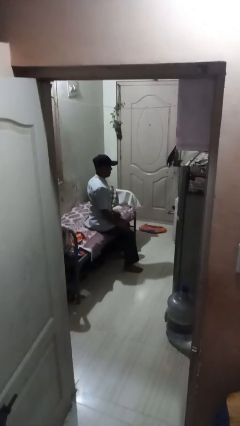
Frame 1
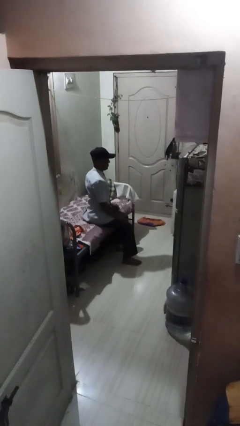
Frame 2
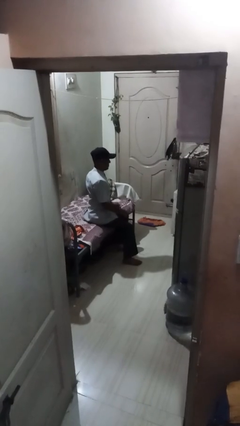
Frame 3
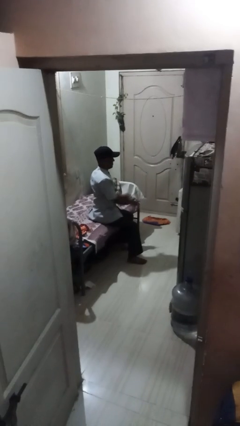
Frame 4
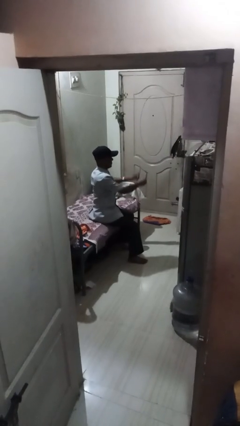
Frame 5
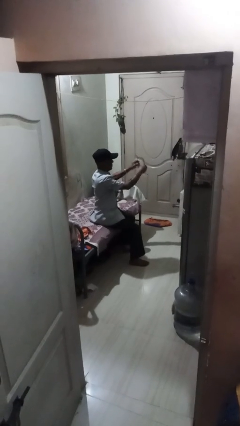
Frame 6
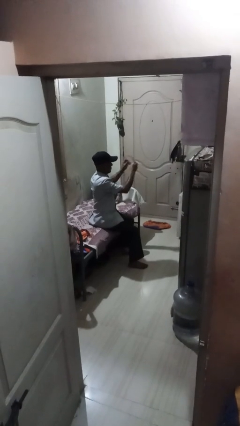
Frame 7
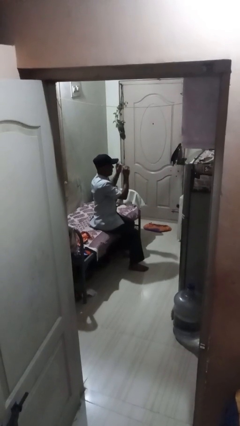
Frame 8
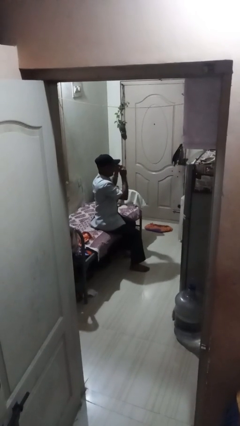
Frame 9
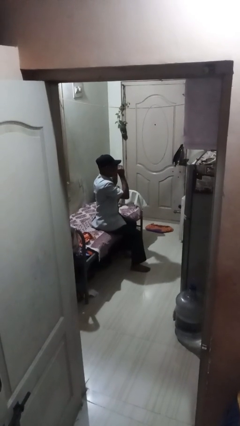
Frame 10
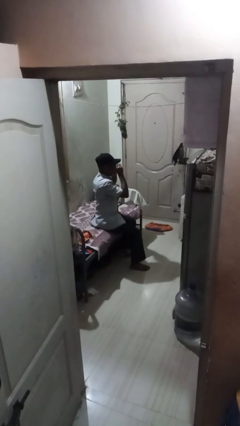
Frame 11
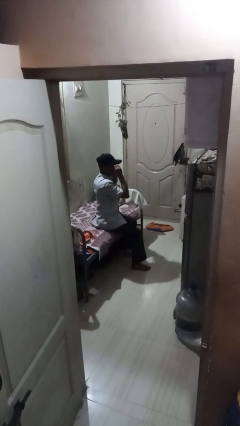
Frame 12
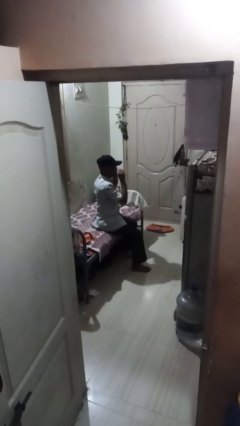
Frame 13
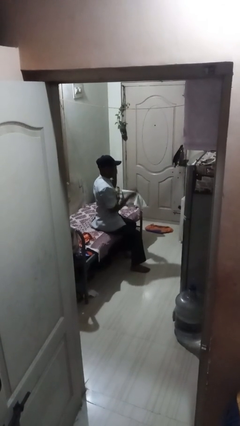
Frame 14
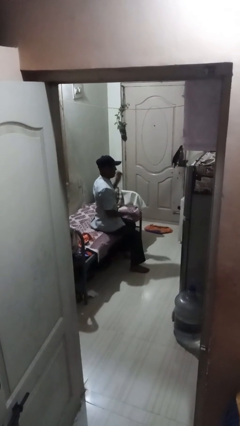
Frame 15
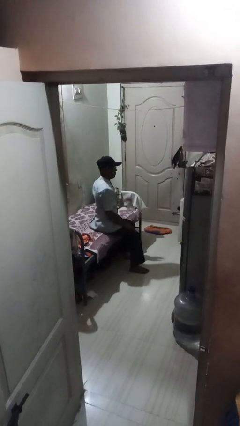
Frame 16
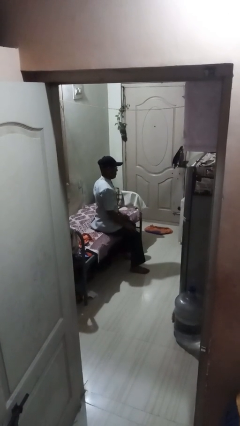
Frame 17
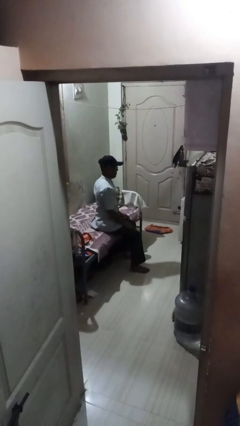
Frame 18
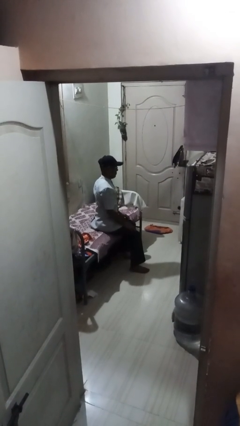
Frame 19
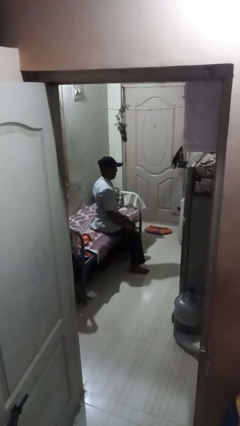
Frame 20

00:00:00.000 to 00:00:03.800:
person puts on glasses

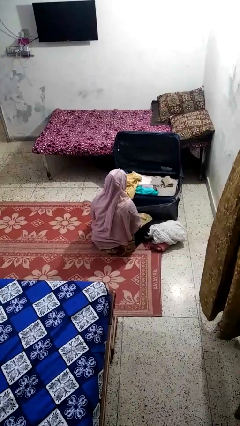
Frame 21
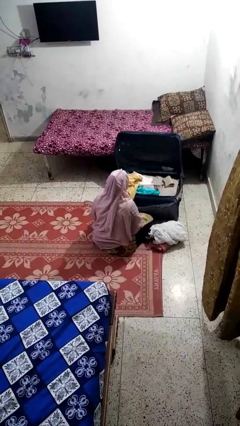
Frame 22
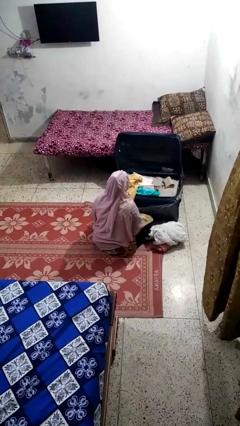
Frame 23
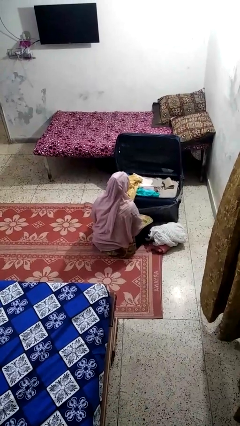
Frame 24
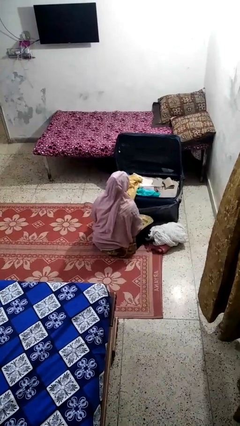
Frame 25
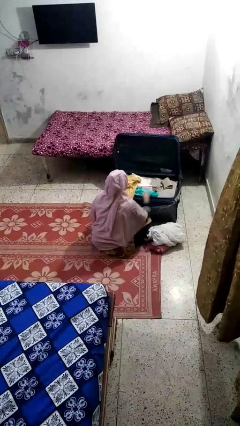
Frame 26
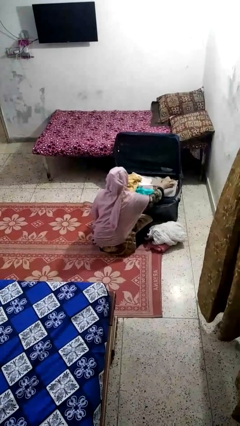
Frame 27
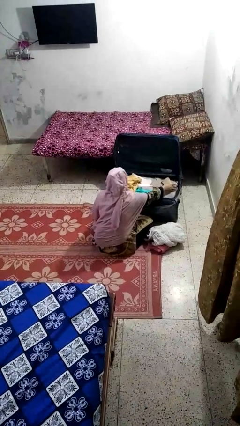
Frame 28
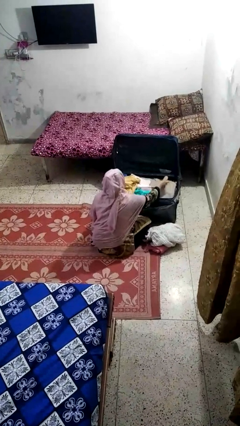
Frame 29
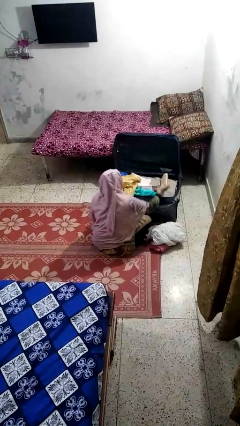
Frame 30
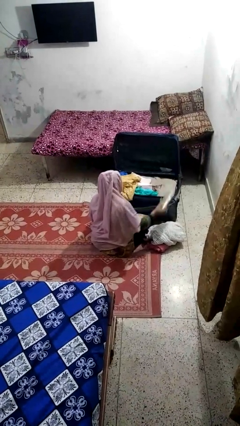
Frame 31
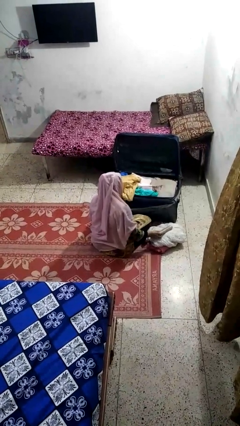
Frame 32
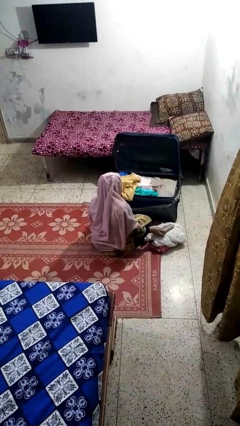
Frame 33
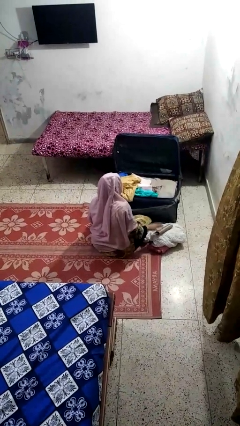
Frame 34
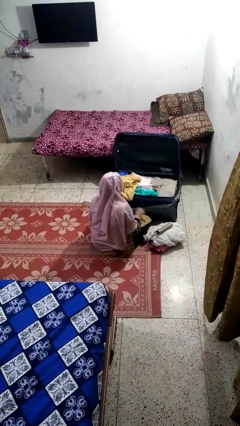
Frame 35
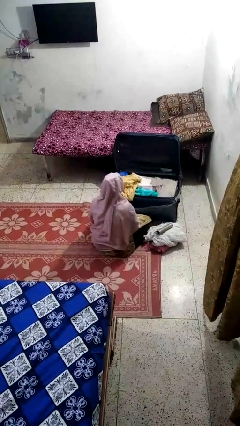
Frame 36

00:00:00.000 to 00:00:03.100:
person unloads clothes from suitcase

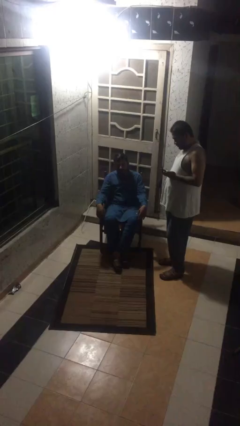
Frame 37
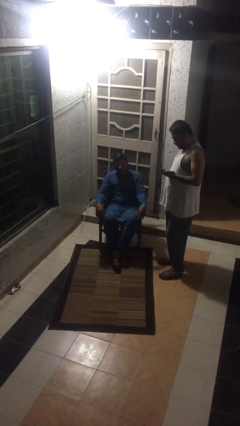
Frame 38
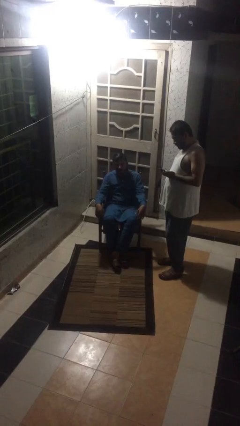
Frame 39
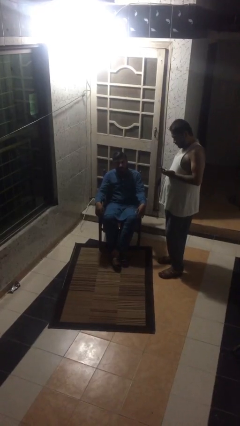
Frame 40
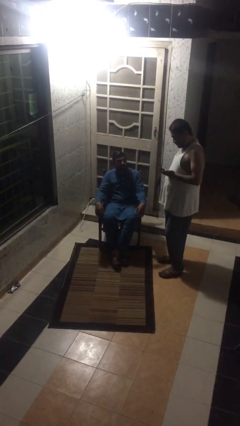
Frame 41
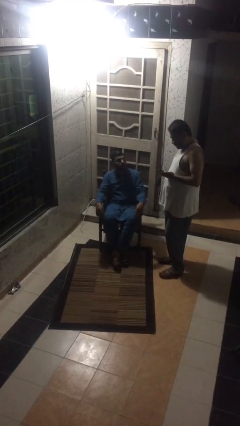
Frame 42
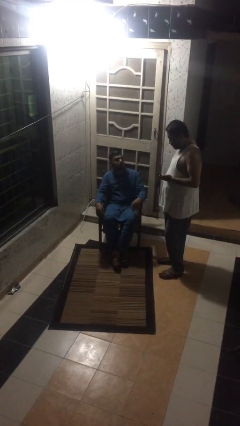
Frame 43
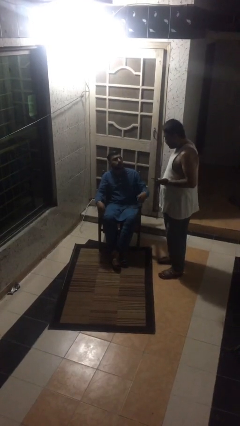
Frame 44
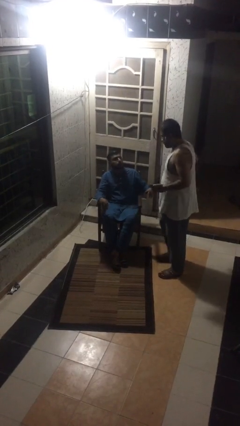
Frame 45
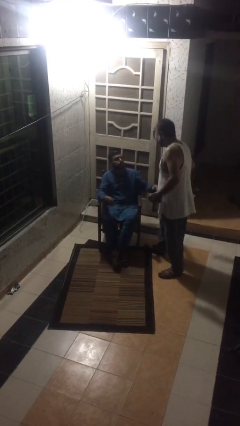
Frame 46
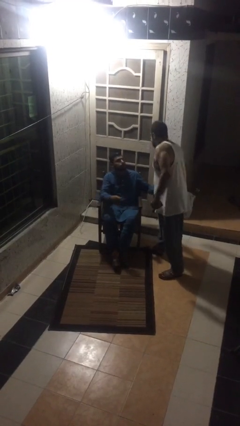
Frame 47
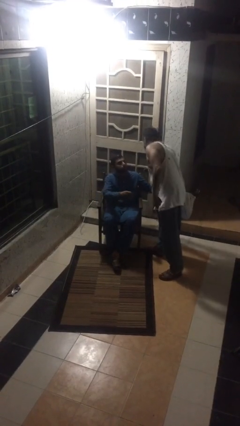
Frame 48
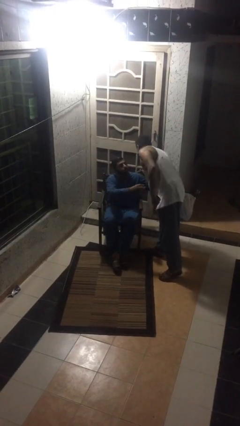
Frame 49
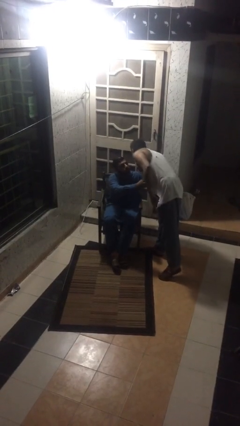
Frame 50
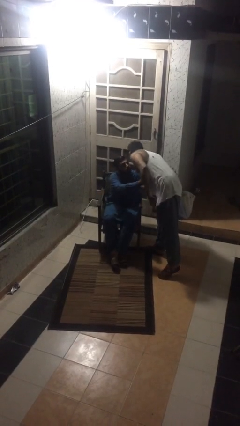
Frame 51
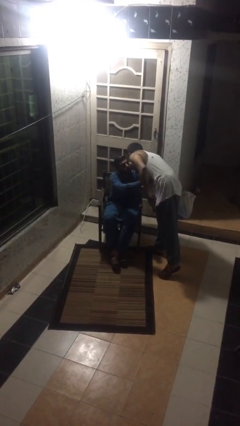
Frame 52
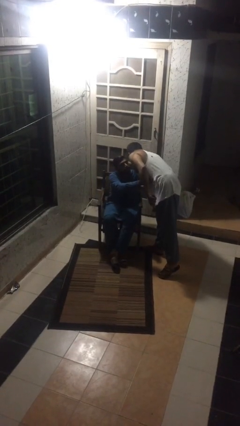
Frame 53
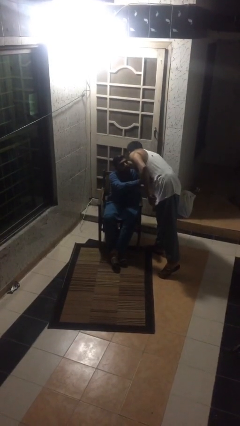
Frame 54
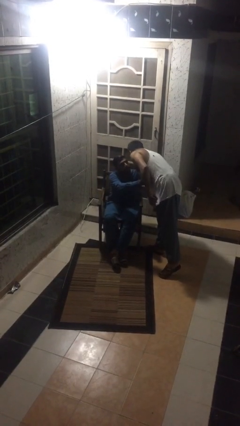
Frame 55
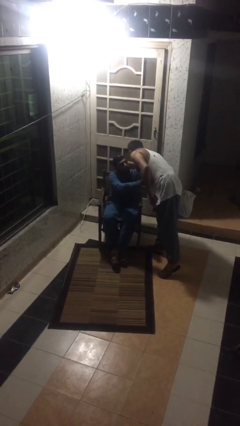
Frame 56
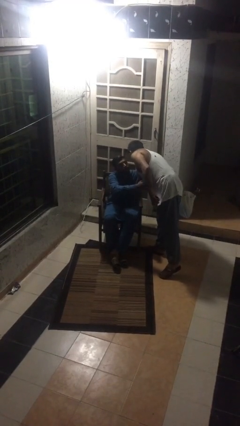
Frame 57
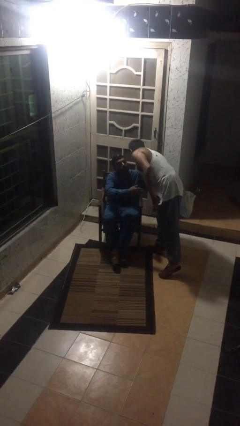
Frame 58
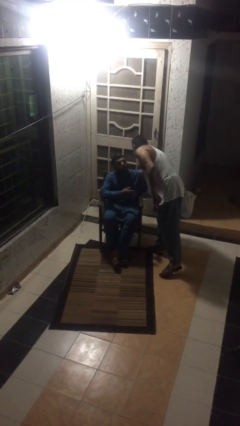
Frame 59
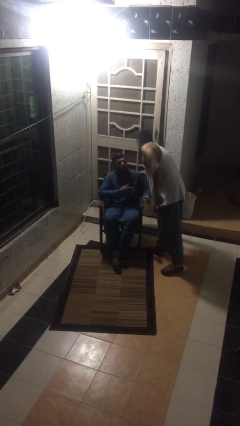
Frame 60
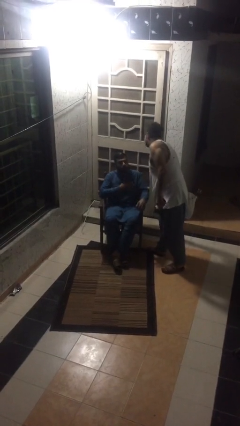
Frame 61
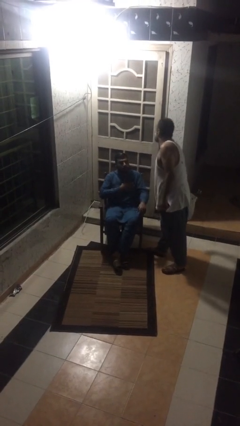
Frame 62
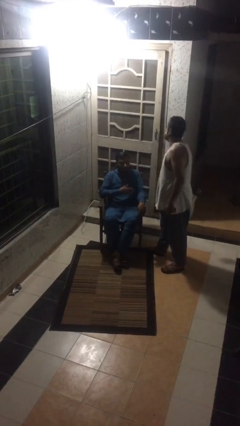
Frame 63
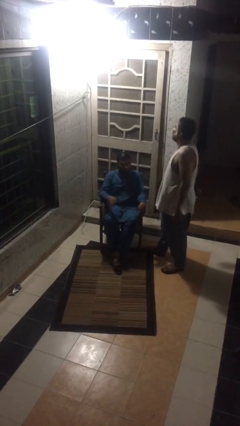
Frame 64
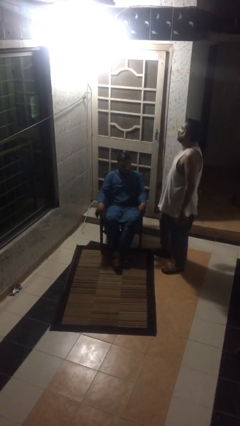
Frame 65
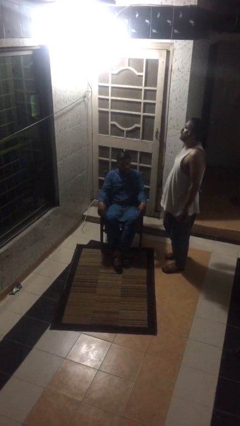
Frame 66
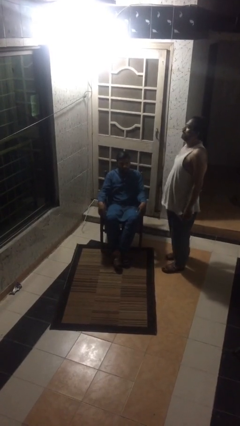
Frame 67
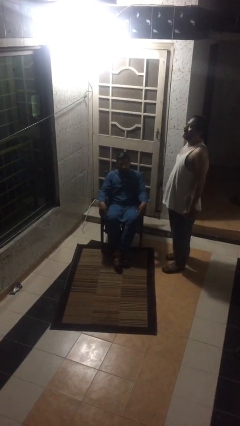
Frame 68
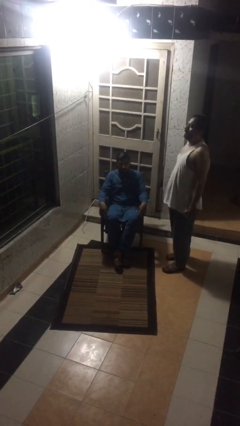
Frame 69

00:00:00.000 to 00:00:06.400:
person embraces person

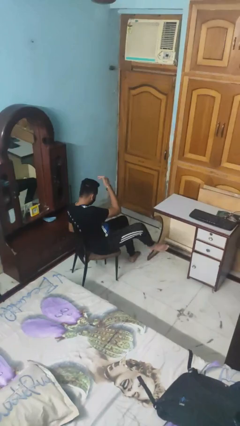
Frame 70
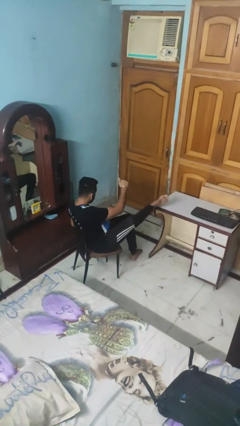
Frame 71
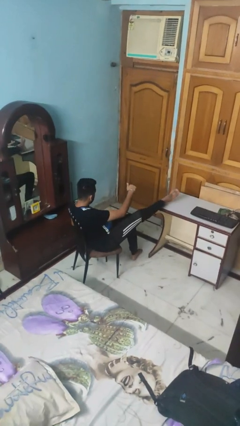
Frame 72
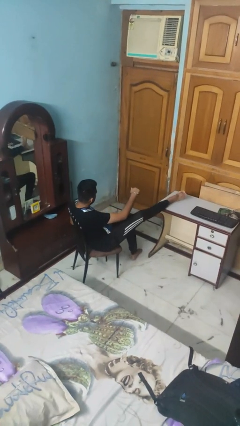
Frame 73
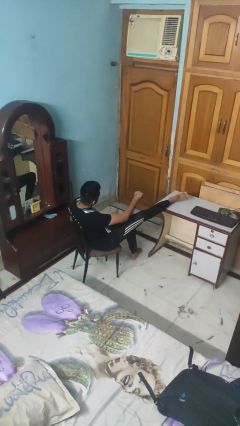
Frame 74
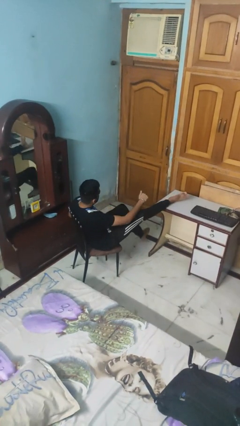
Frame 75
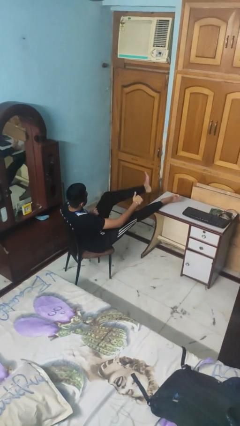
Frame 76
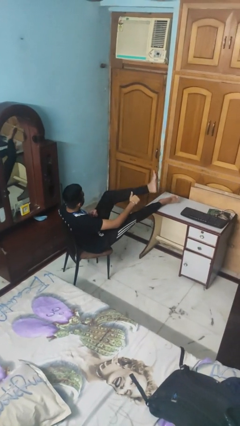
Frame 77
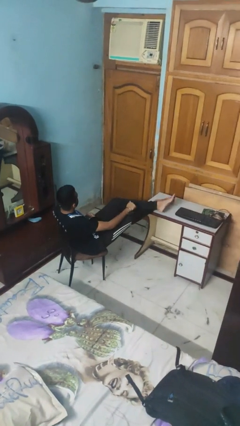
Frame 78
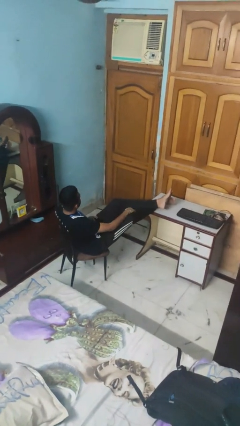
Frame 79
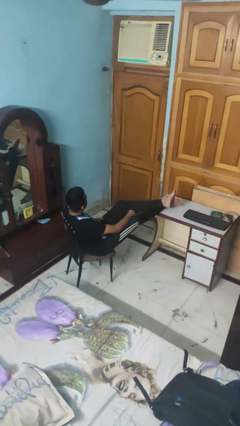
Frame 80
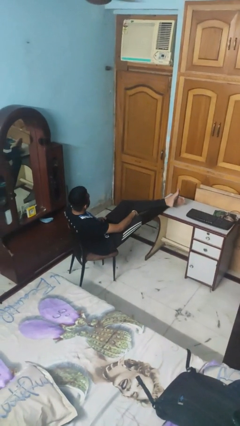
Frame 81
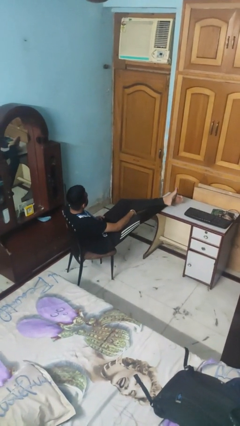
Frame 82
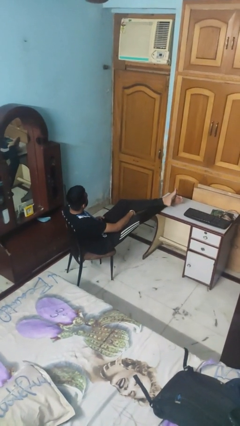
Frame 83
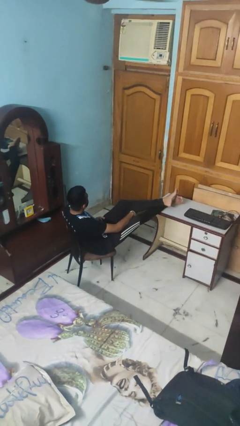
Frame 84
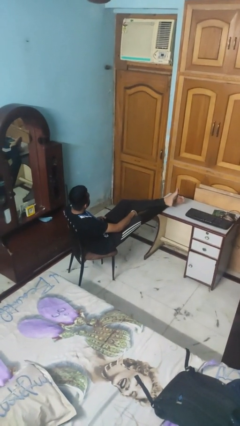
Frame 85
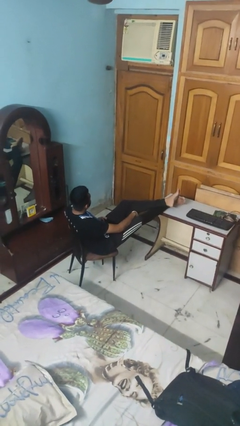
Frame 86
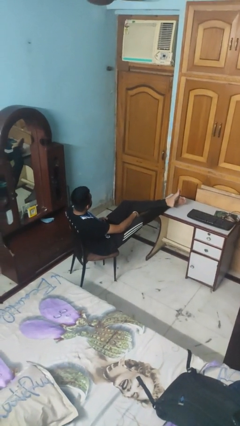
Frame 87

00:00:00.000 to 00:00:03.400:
person puts feet up

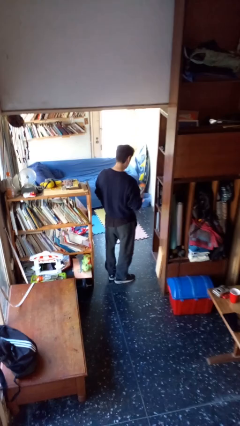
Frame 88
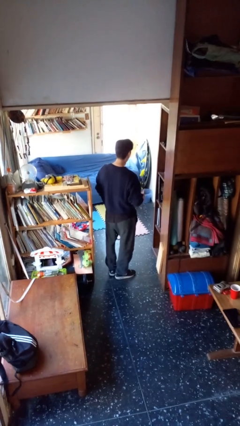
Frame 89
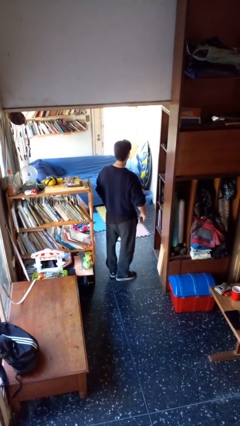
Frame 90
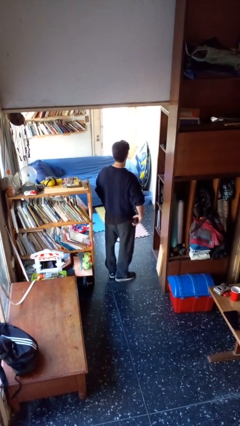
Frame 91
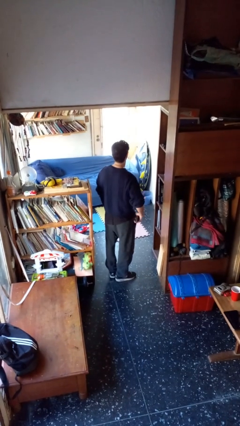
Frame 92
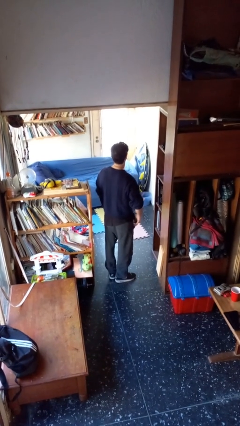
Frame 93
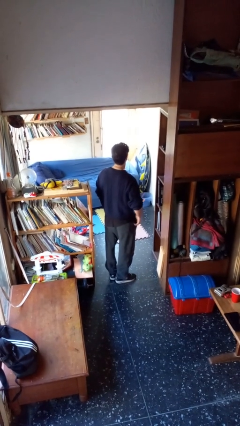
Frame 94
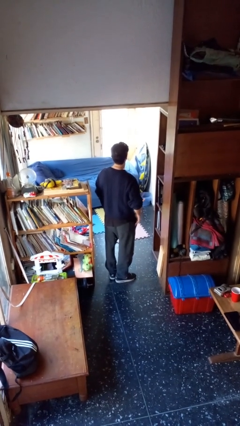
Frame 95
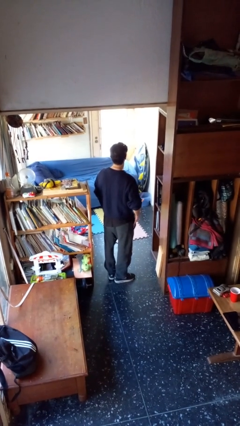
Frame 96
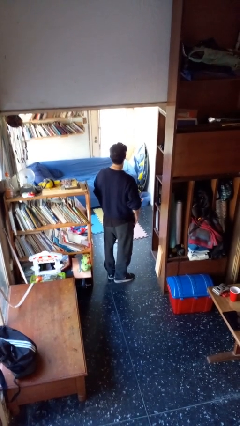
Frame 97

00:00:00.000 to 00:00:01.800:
person puts phone into pocket
